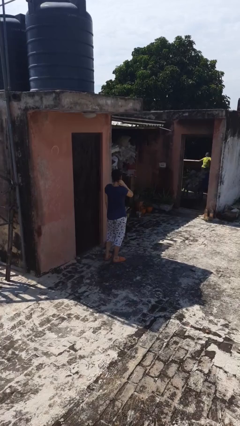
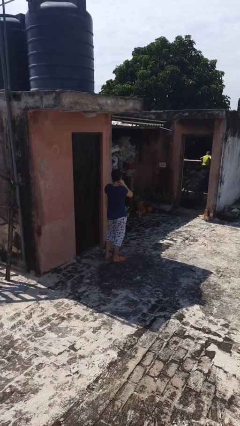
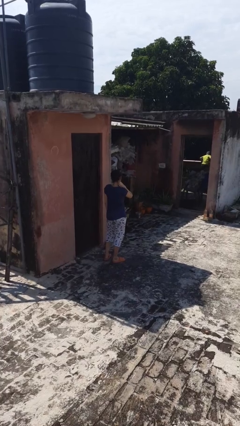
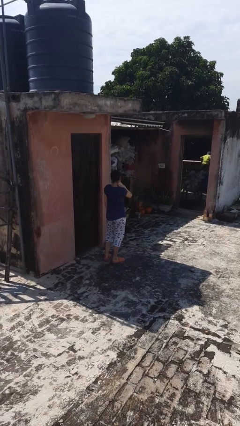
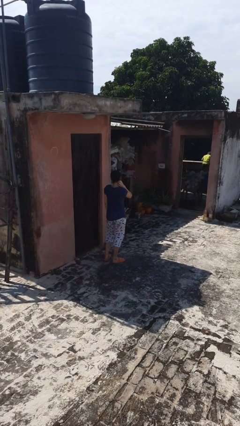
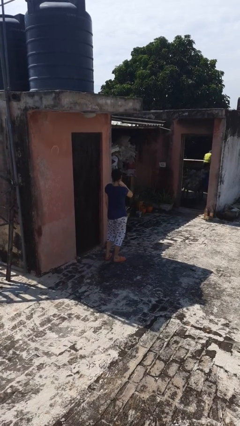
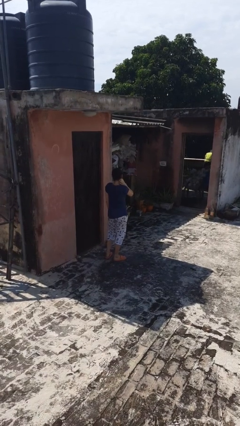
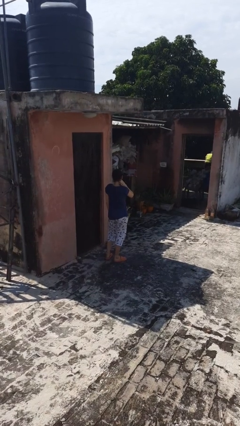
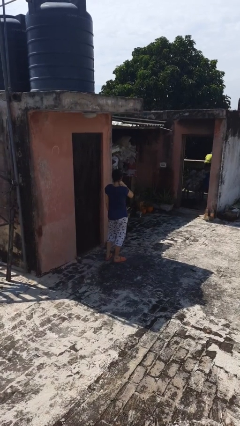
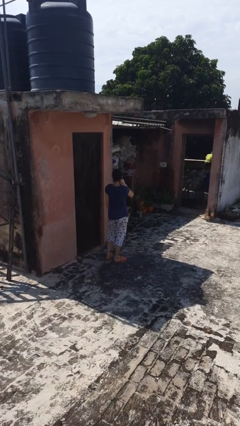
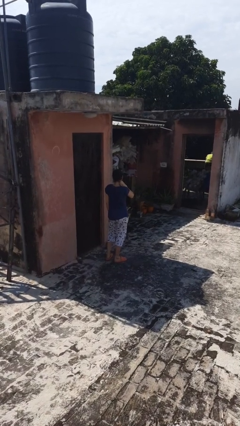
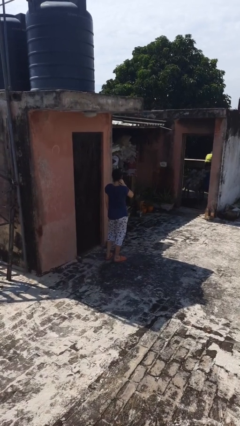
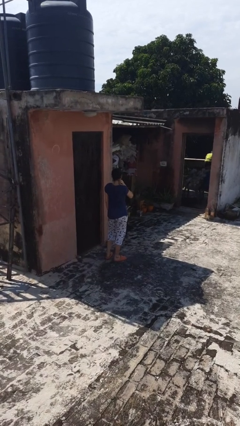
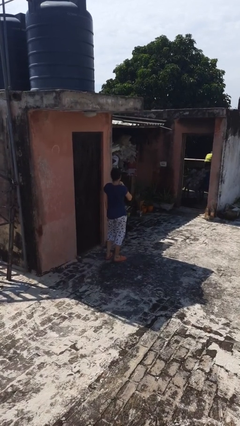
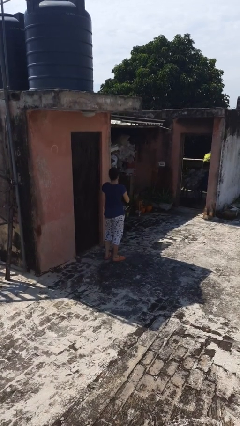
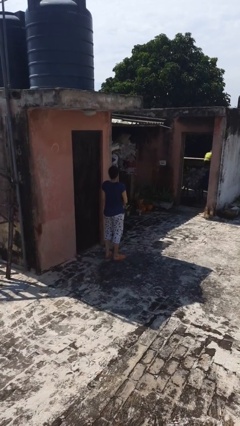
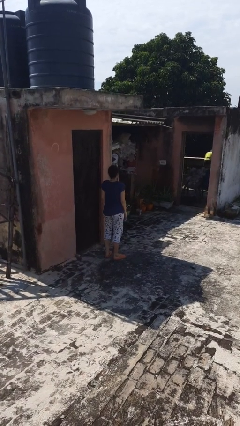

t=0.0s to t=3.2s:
person scratches face

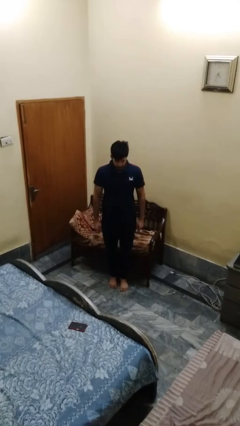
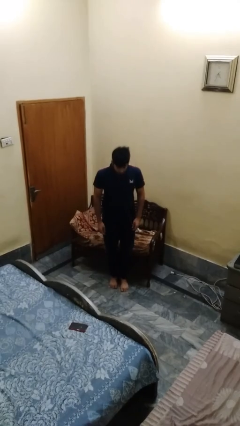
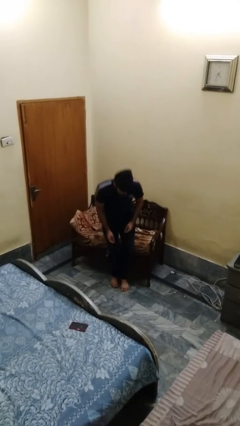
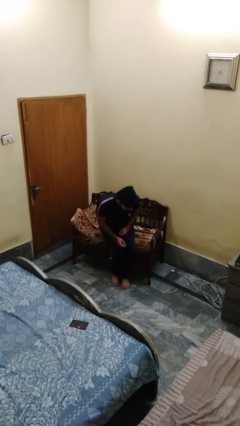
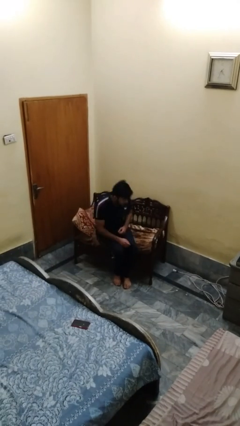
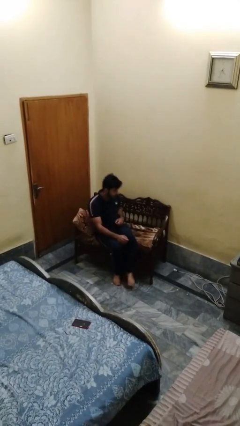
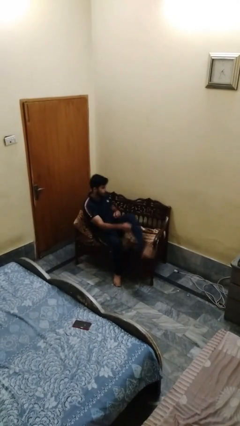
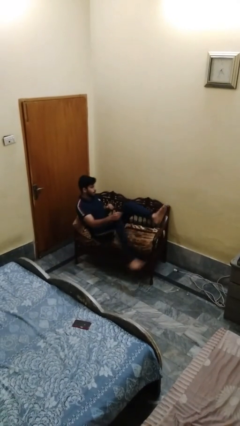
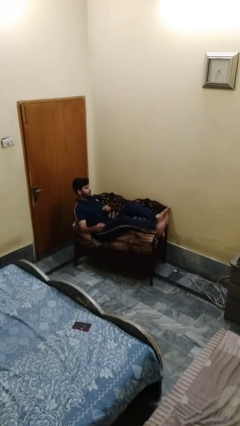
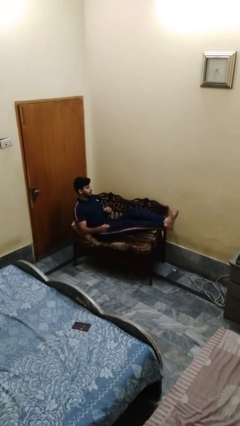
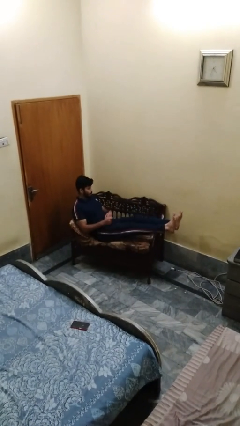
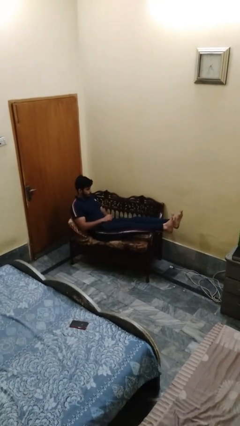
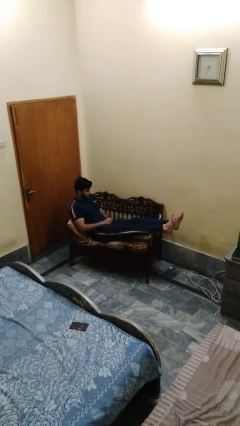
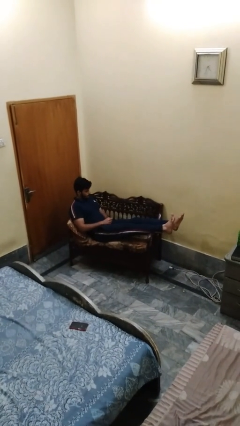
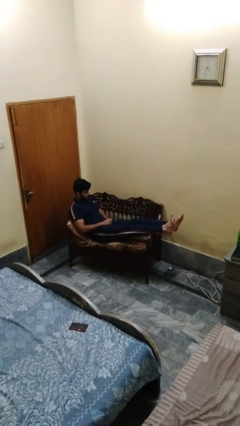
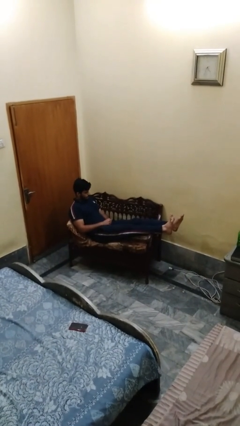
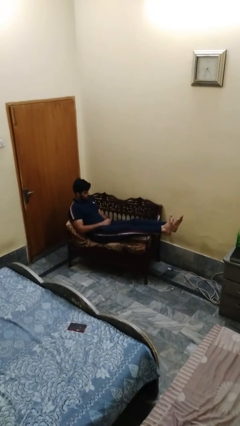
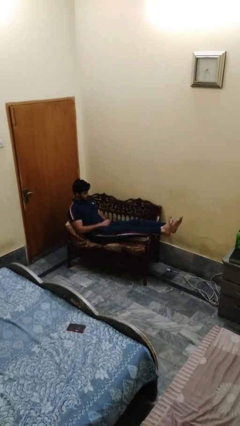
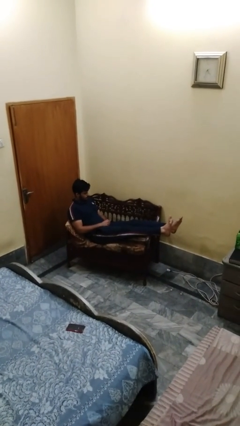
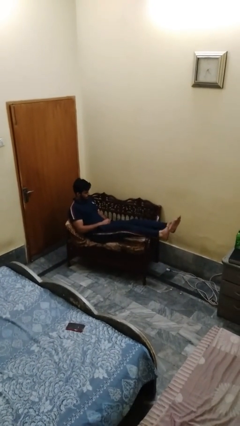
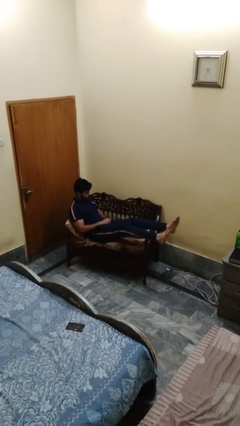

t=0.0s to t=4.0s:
person lies down on couch

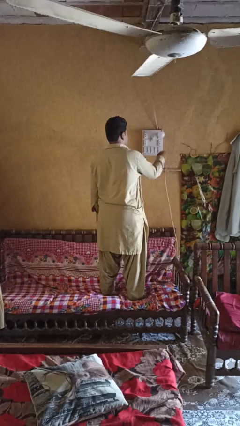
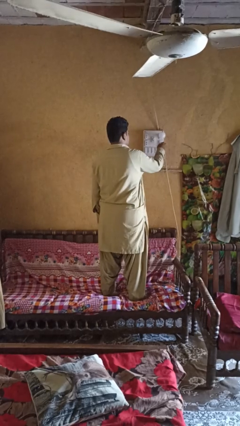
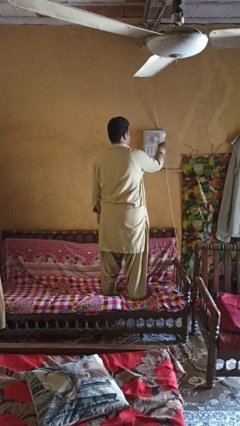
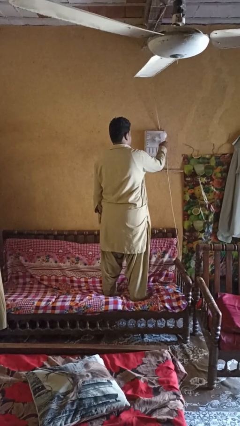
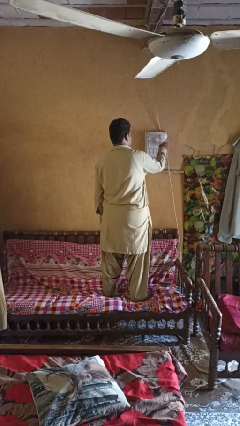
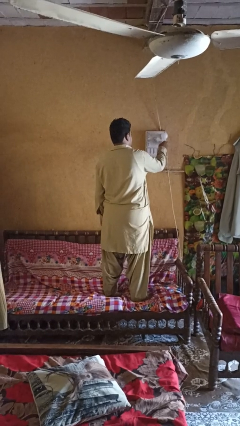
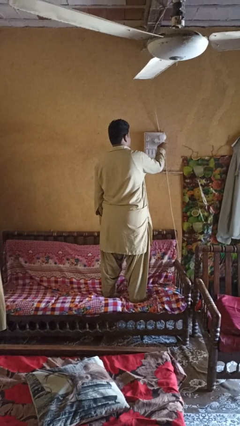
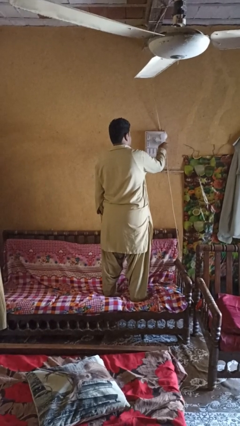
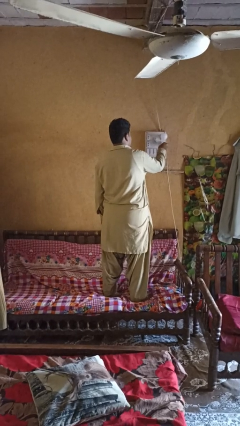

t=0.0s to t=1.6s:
person plugs into electrical socket

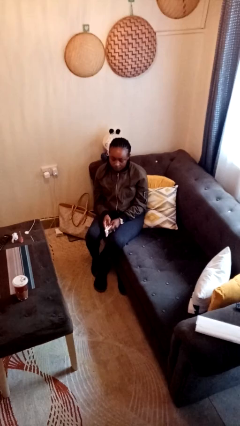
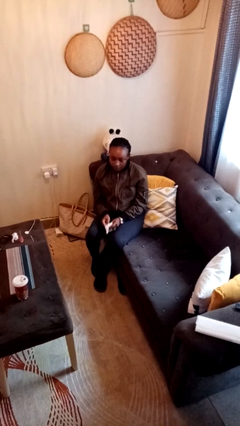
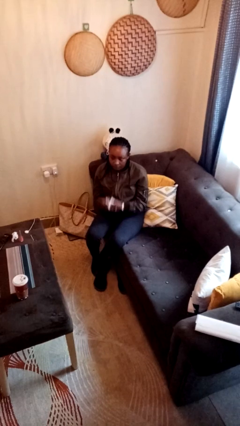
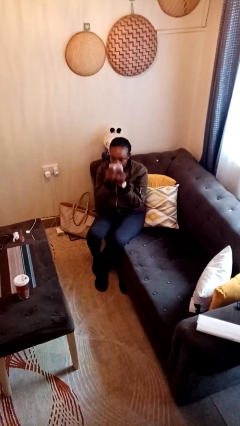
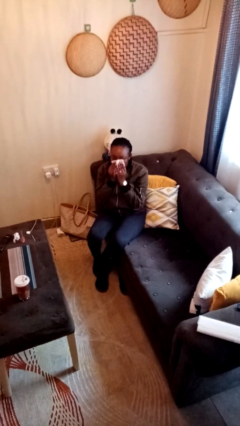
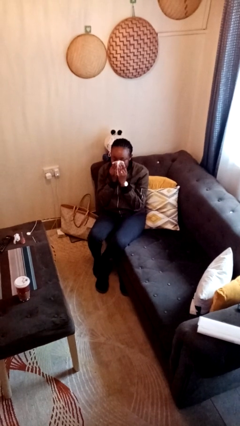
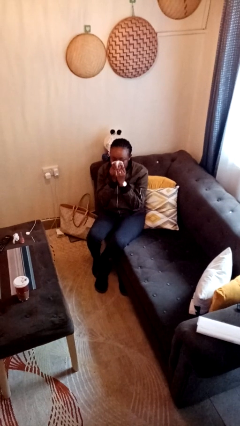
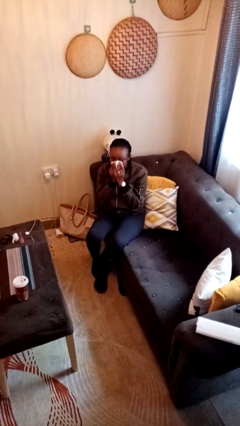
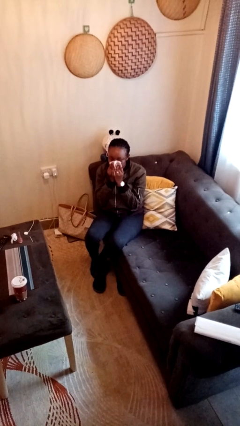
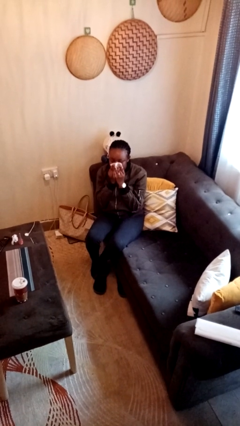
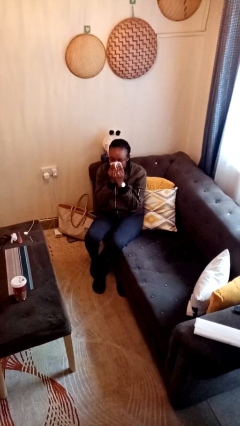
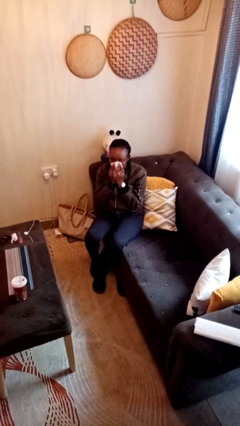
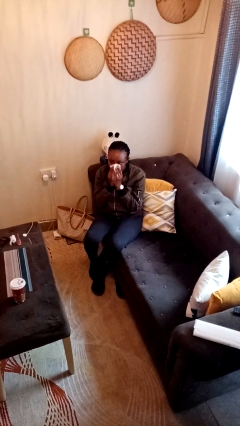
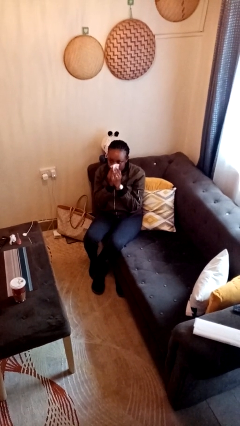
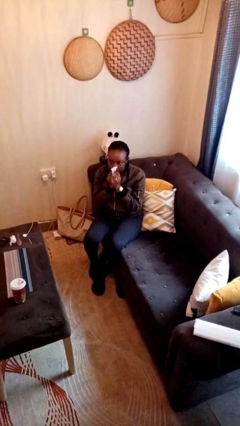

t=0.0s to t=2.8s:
person blows nose

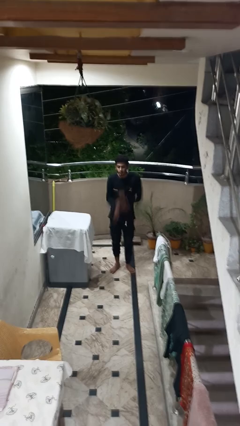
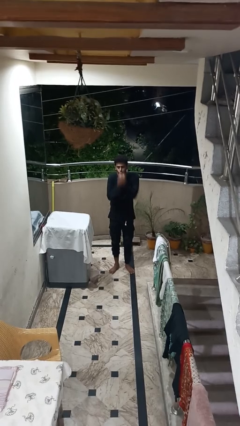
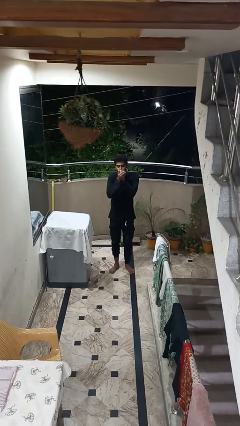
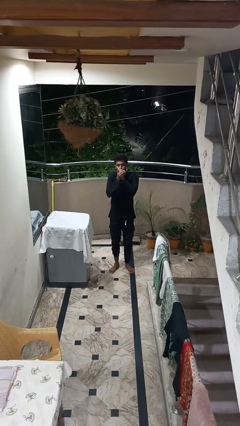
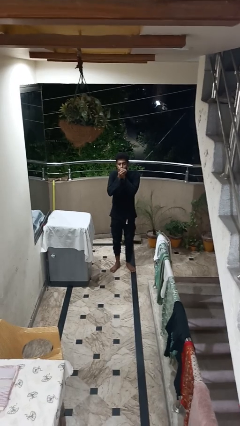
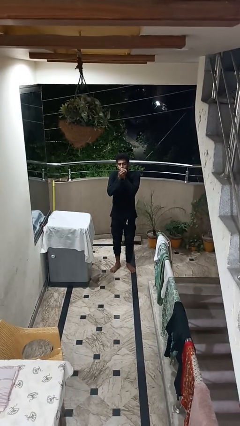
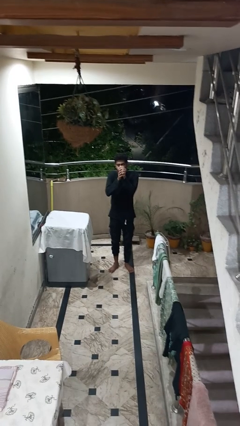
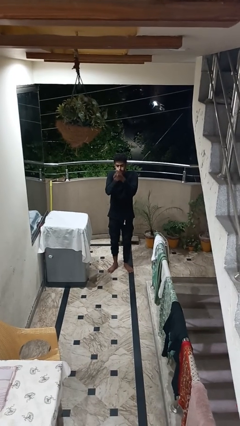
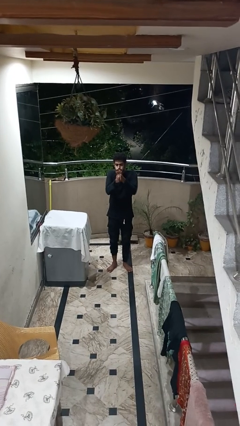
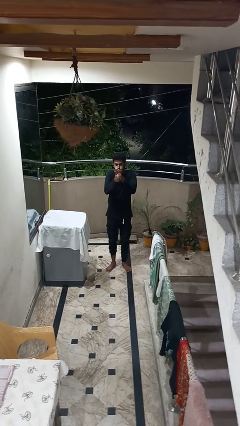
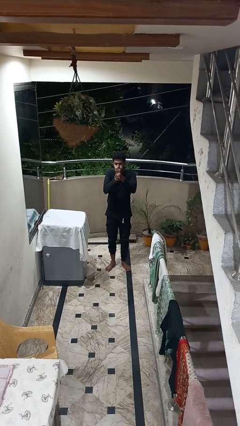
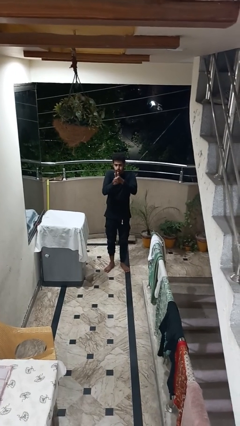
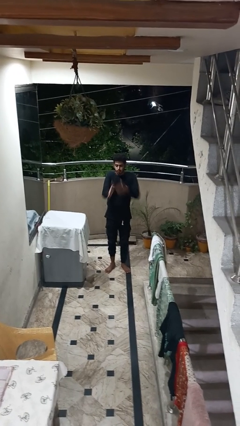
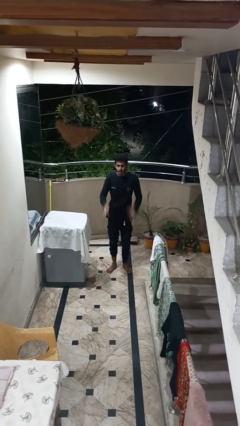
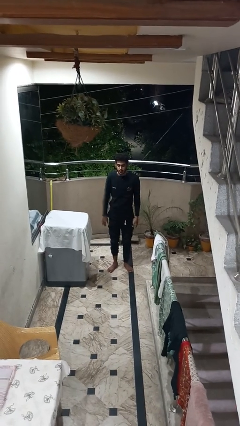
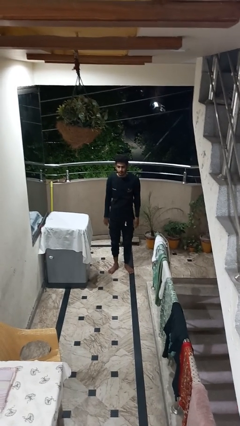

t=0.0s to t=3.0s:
person blows into hands

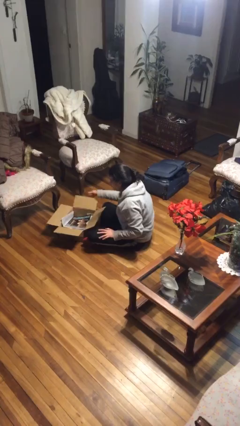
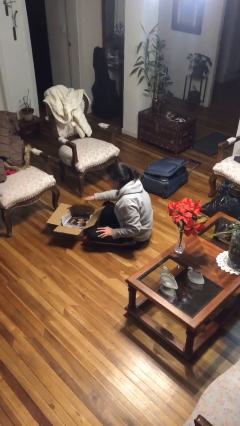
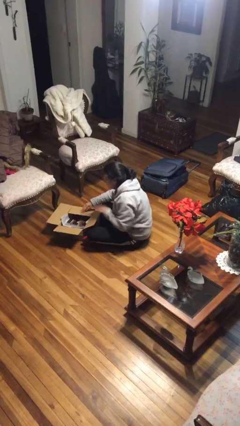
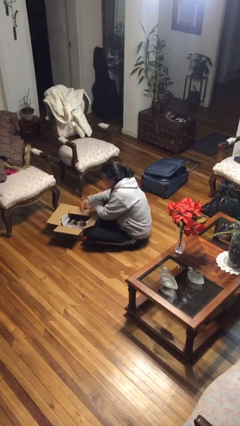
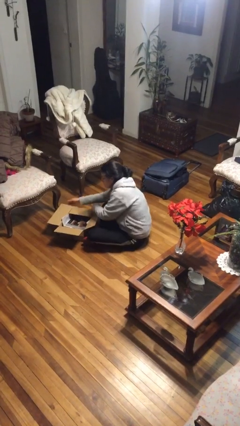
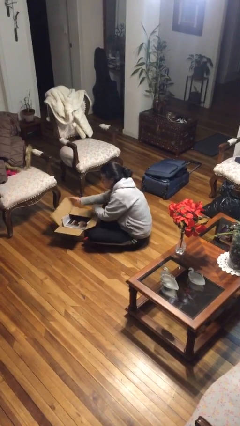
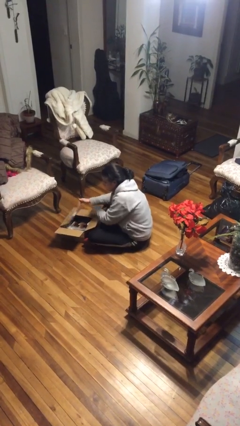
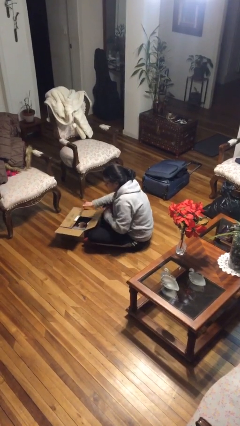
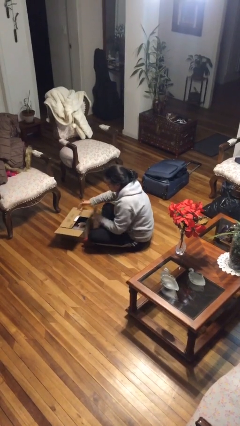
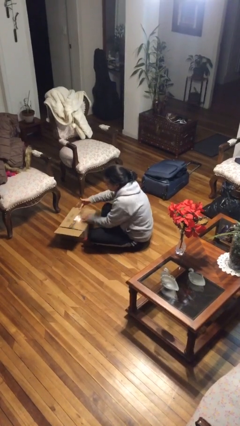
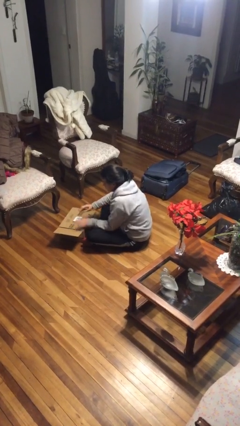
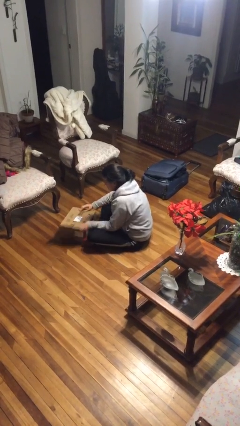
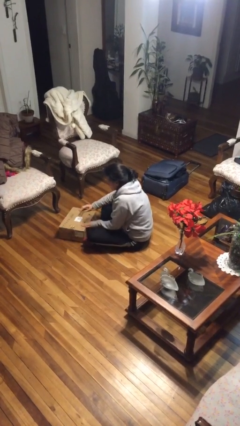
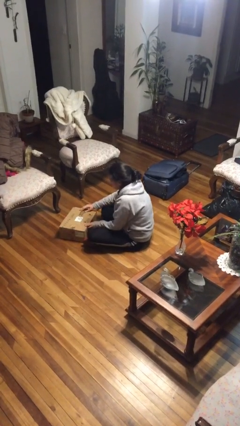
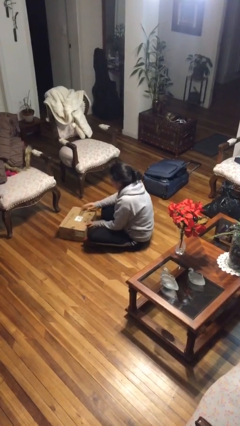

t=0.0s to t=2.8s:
person closes box

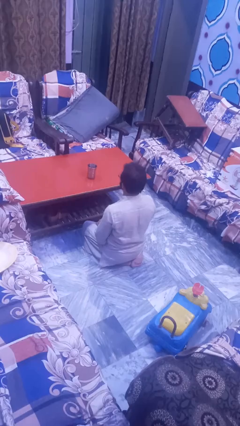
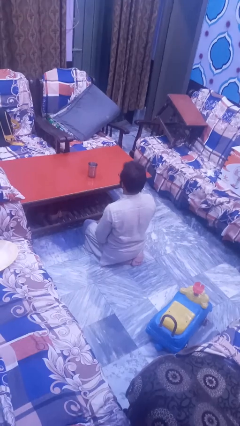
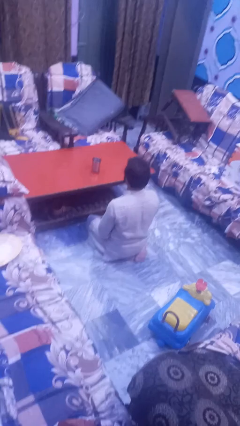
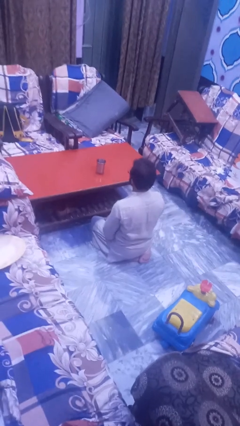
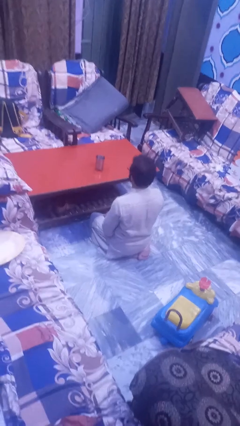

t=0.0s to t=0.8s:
person knocks over glass
